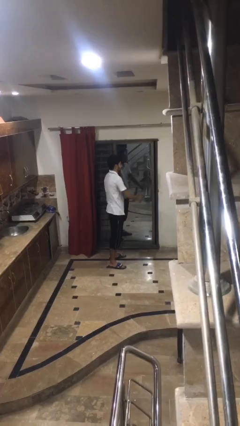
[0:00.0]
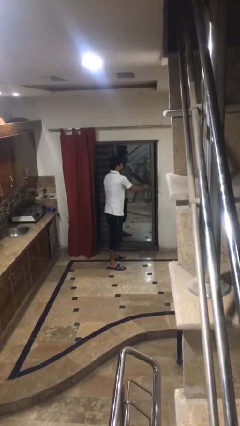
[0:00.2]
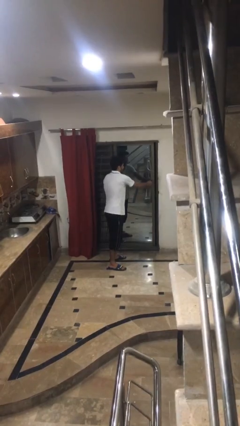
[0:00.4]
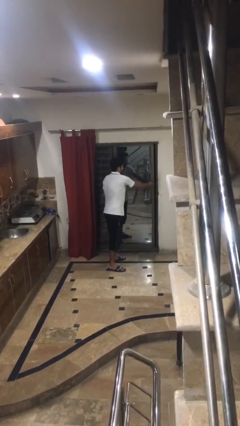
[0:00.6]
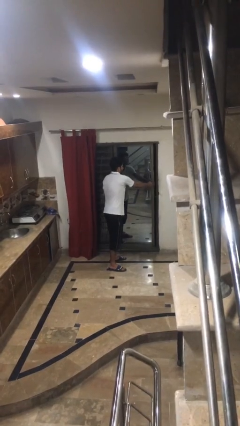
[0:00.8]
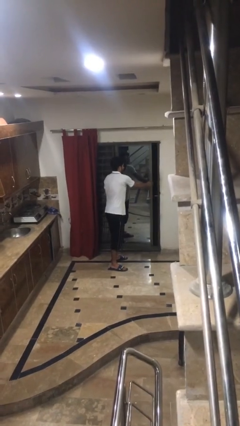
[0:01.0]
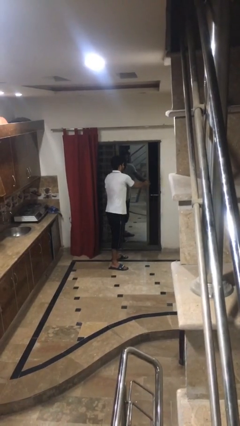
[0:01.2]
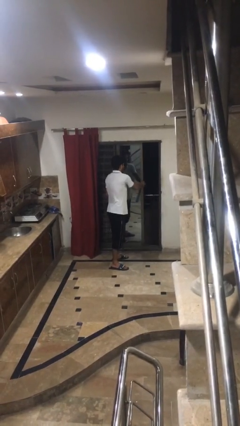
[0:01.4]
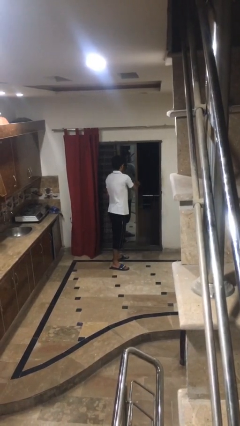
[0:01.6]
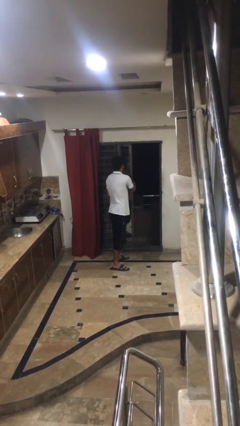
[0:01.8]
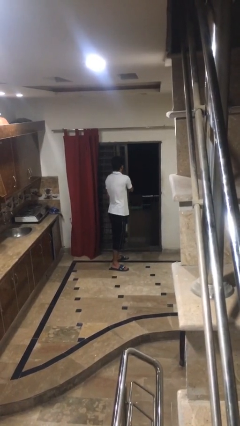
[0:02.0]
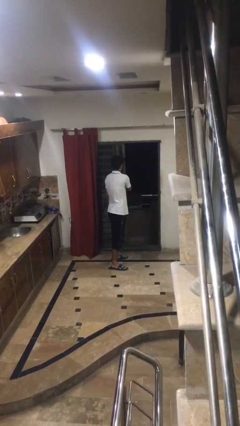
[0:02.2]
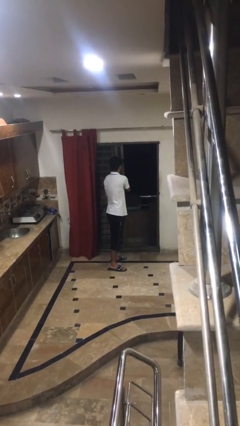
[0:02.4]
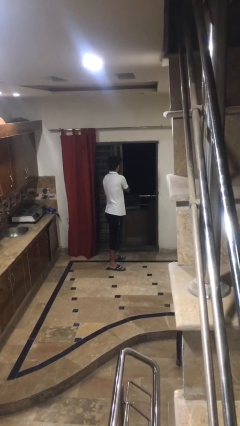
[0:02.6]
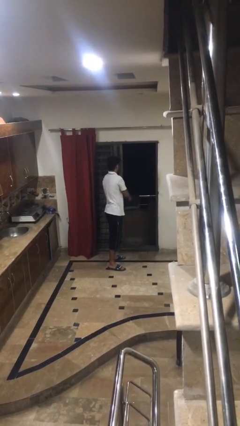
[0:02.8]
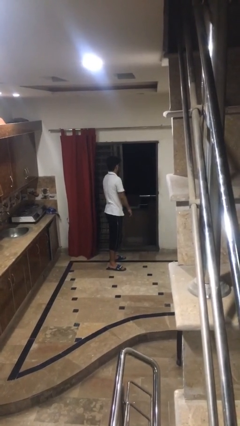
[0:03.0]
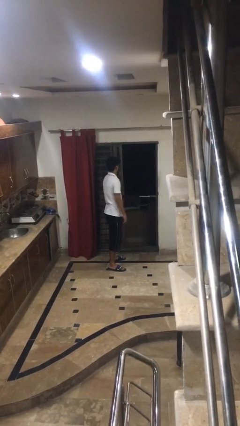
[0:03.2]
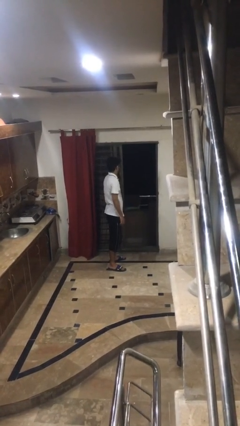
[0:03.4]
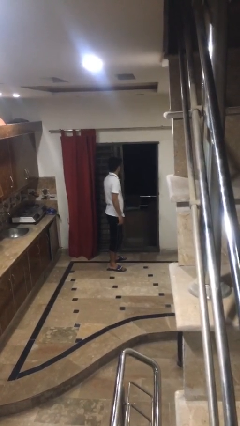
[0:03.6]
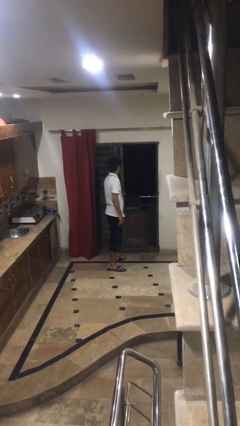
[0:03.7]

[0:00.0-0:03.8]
person opens sliding door

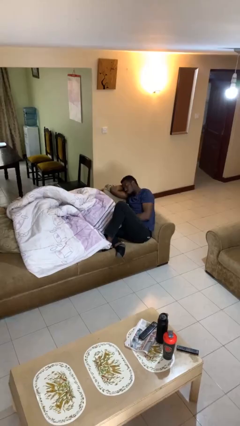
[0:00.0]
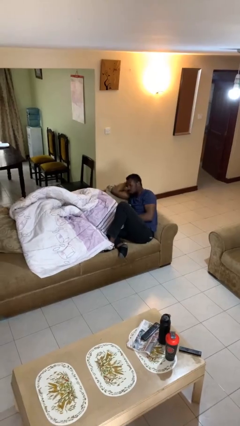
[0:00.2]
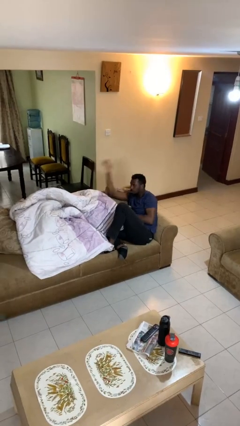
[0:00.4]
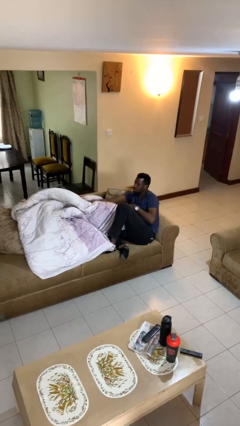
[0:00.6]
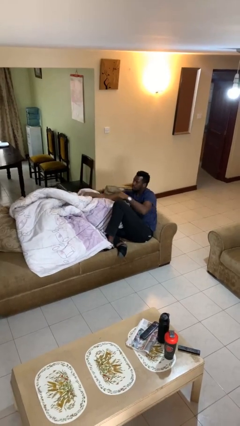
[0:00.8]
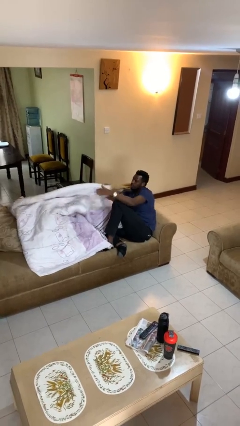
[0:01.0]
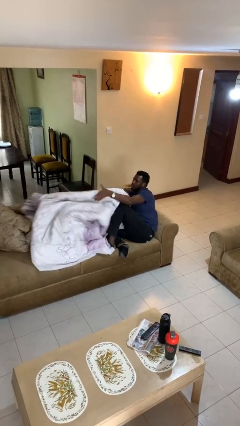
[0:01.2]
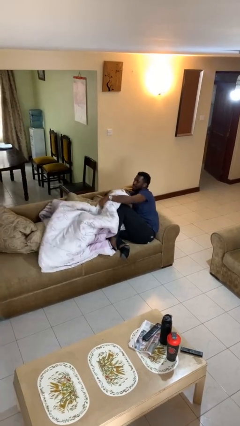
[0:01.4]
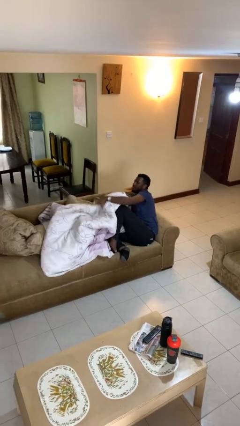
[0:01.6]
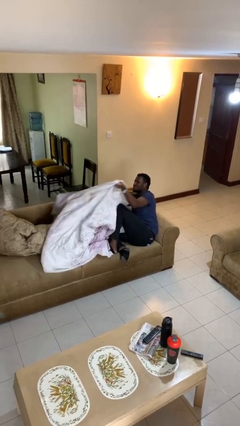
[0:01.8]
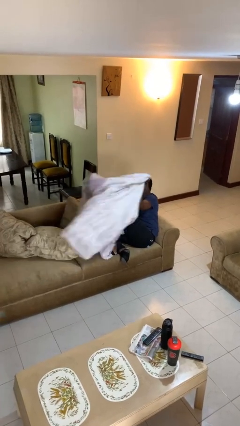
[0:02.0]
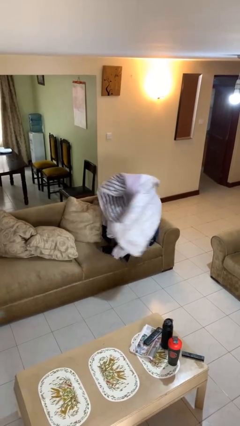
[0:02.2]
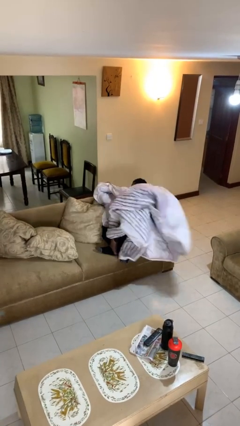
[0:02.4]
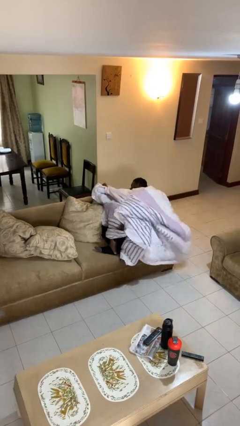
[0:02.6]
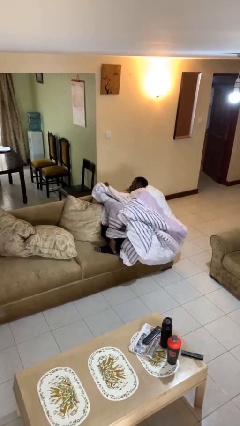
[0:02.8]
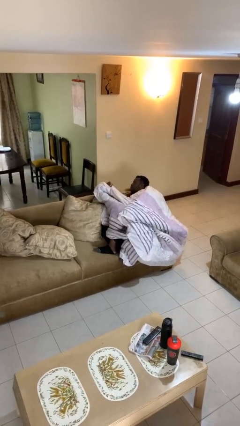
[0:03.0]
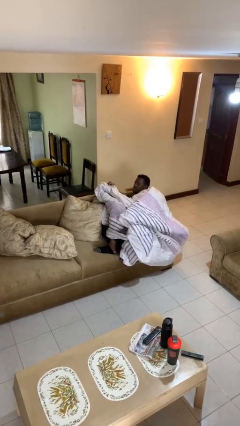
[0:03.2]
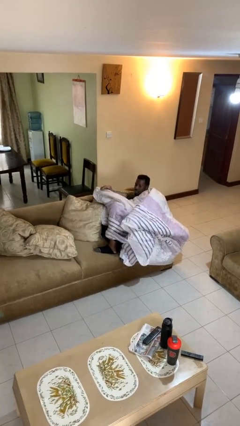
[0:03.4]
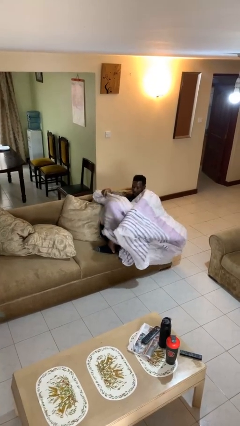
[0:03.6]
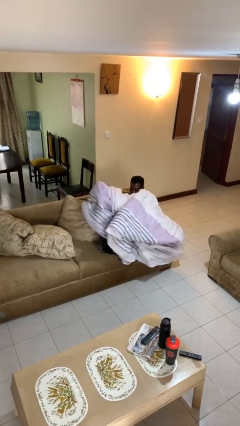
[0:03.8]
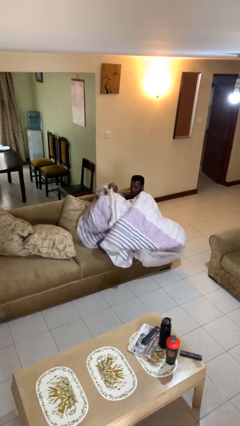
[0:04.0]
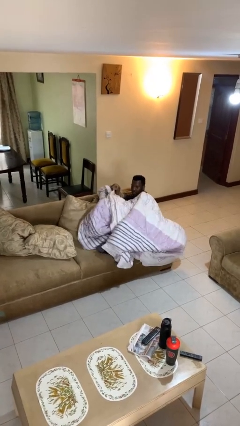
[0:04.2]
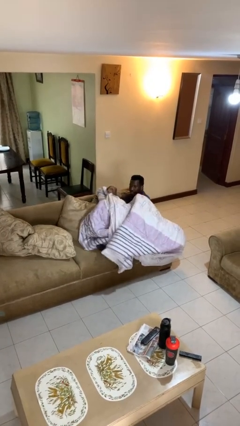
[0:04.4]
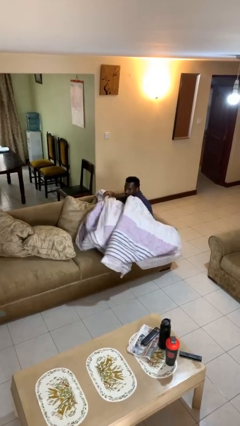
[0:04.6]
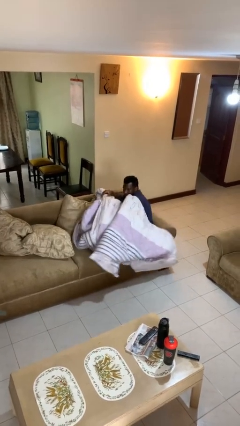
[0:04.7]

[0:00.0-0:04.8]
person covers with blanket

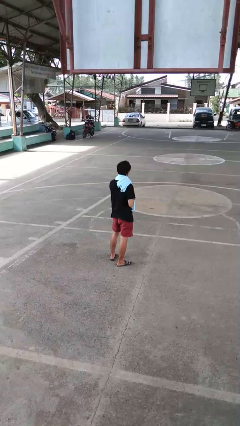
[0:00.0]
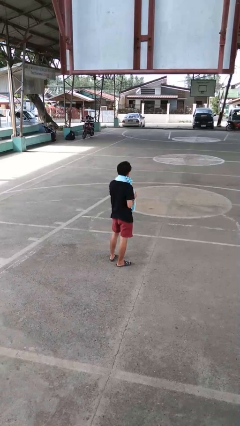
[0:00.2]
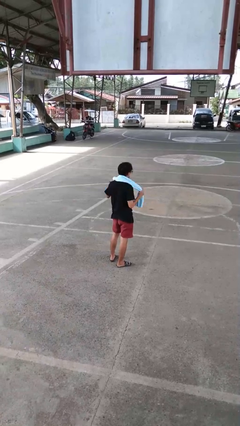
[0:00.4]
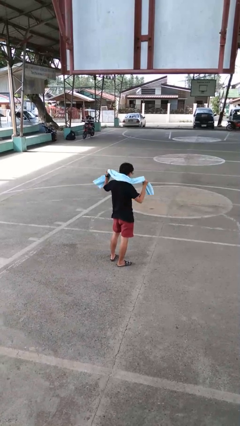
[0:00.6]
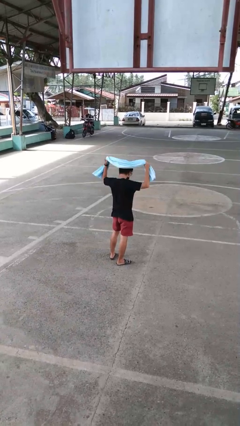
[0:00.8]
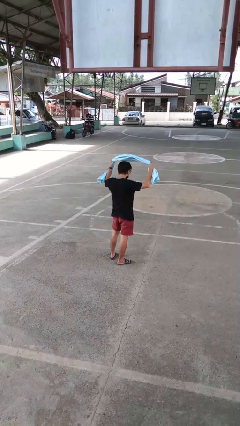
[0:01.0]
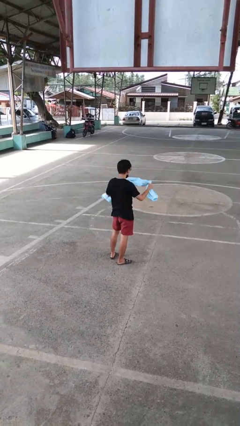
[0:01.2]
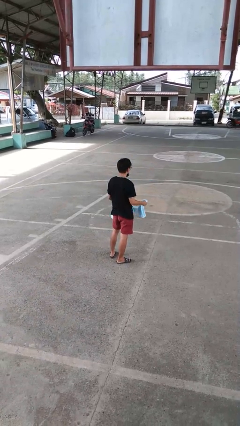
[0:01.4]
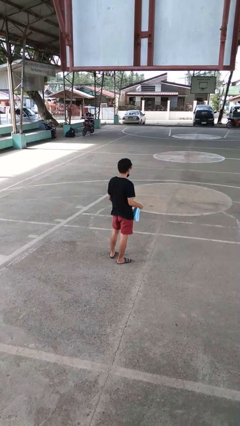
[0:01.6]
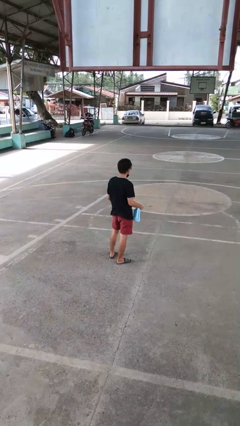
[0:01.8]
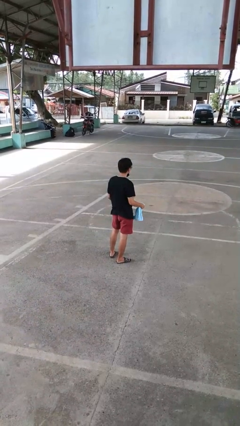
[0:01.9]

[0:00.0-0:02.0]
person takes off scarf

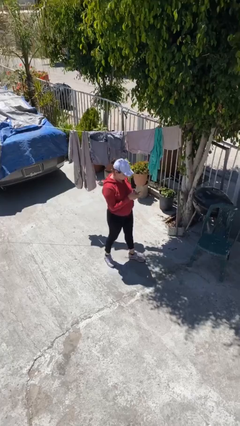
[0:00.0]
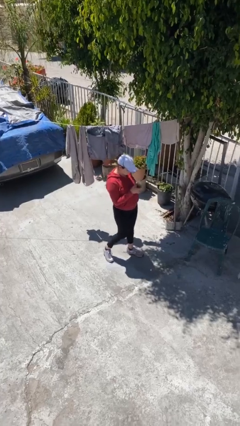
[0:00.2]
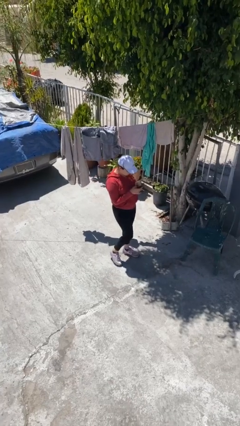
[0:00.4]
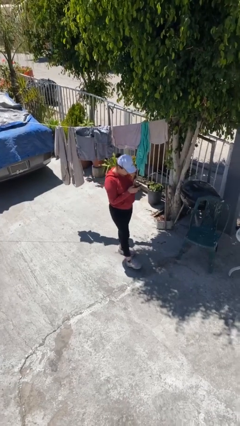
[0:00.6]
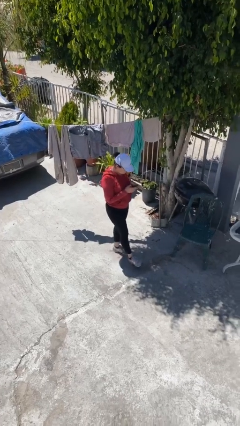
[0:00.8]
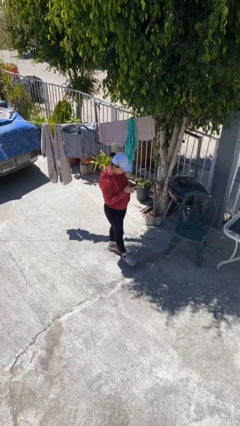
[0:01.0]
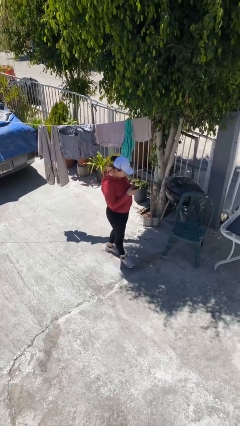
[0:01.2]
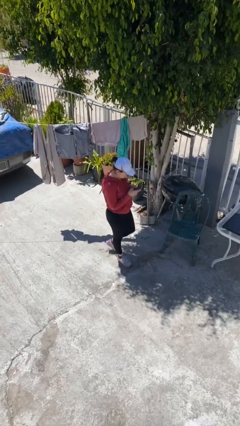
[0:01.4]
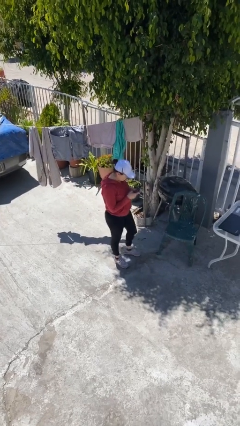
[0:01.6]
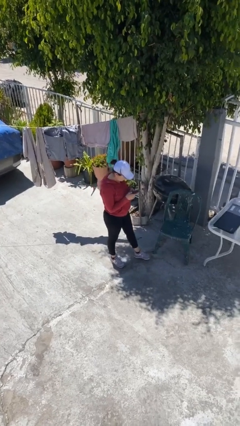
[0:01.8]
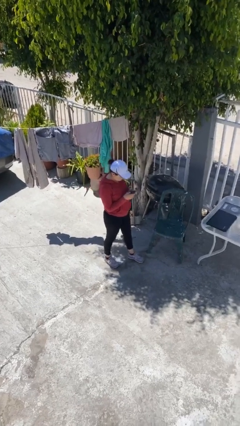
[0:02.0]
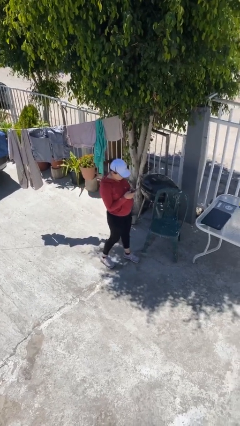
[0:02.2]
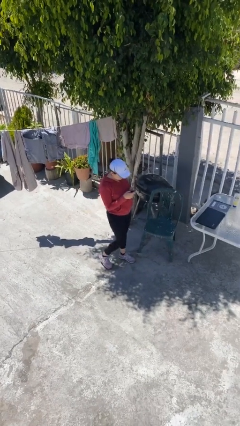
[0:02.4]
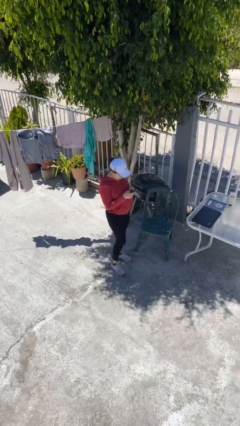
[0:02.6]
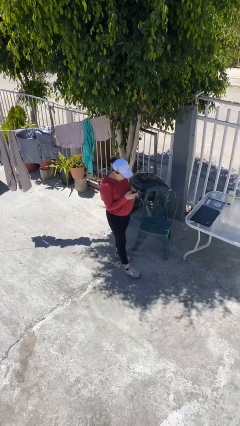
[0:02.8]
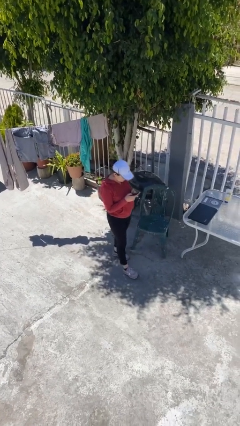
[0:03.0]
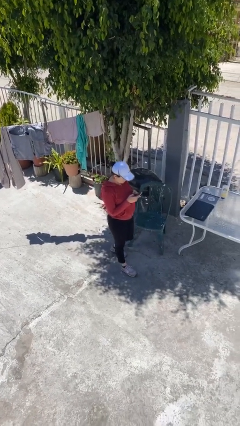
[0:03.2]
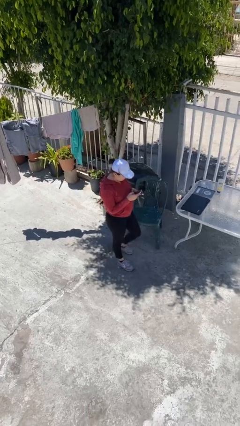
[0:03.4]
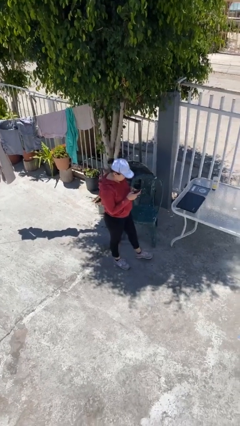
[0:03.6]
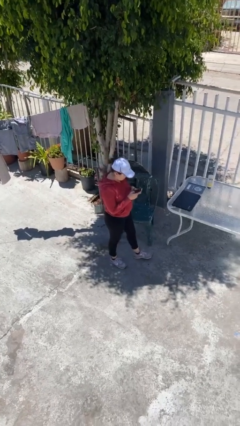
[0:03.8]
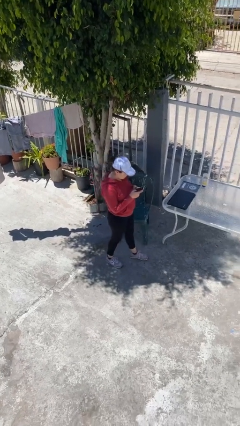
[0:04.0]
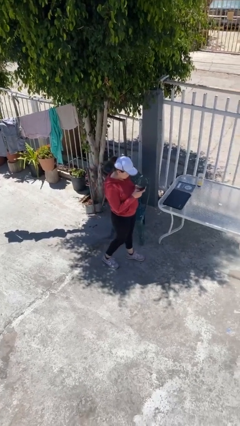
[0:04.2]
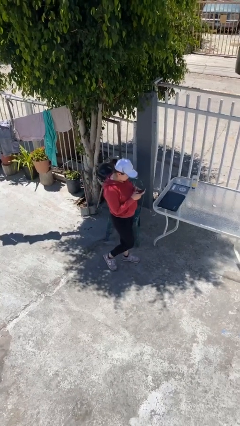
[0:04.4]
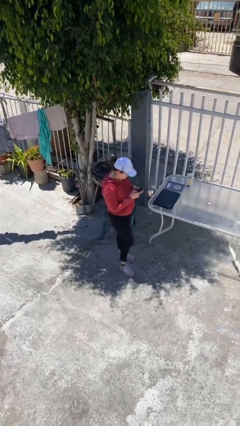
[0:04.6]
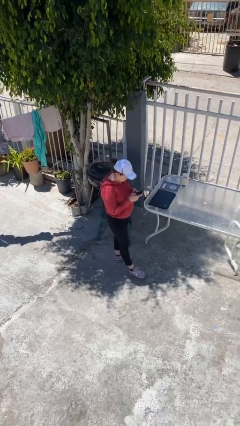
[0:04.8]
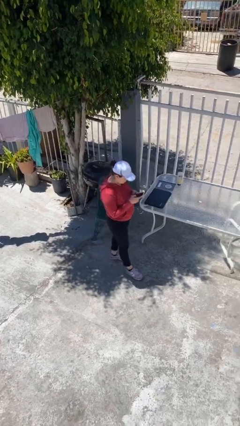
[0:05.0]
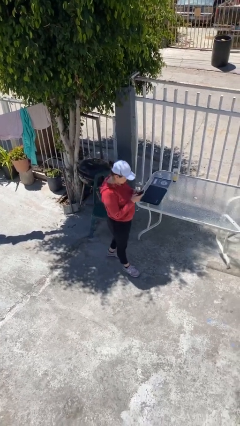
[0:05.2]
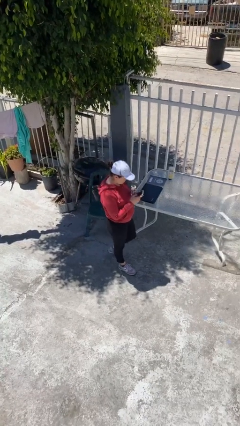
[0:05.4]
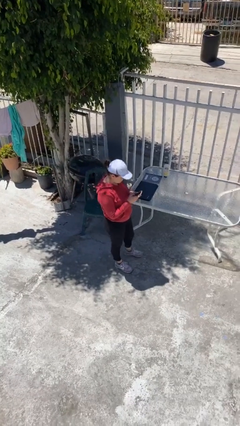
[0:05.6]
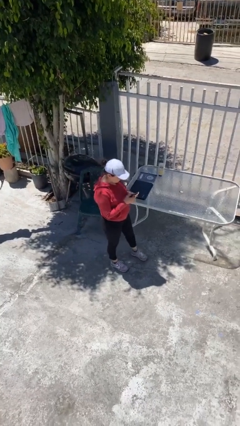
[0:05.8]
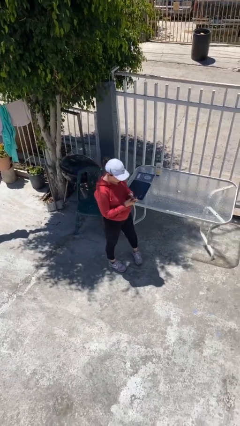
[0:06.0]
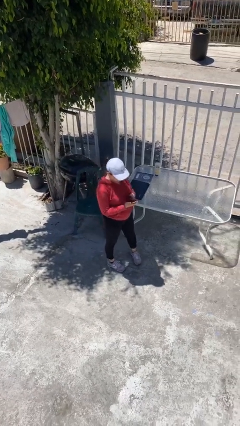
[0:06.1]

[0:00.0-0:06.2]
person texts on phone

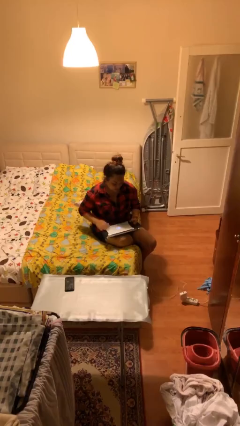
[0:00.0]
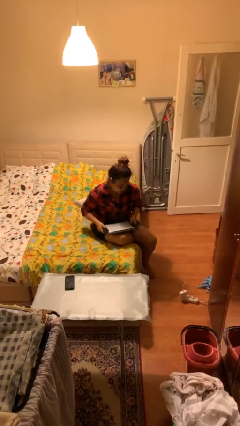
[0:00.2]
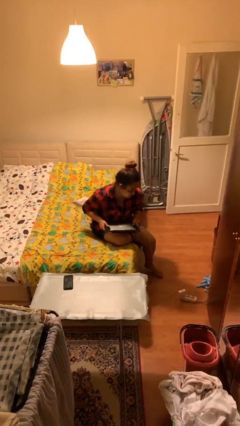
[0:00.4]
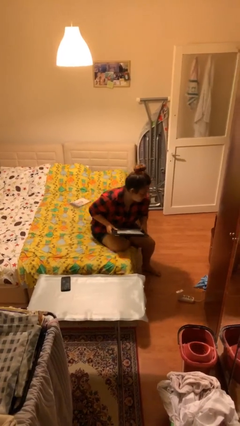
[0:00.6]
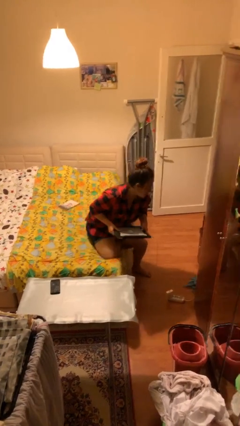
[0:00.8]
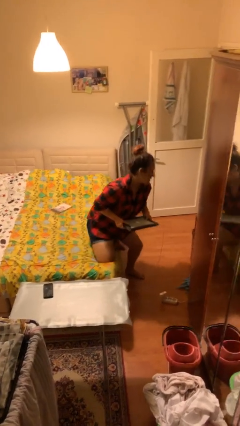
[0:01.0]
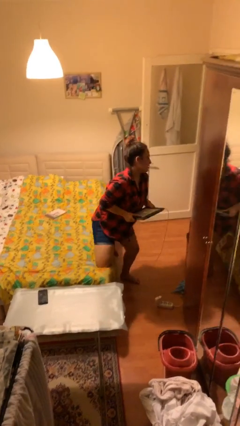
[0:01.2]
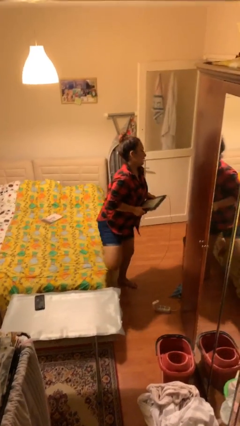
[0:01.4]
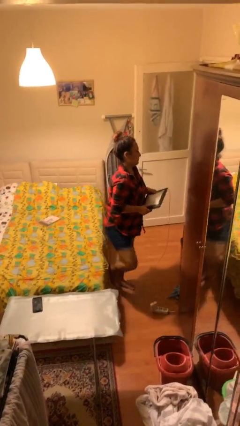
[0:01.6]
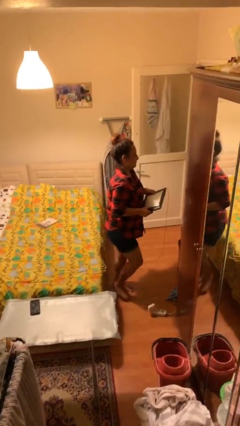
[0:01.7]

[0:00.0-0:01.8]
person stands up
